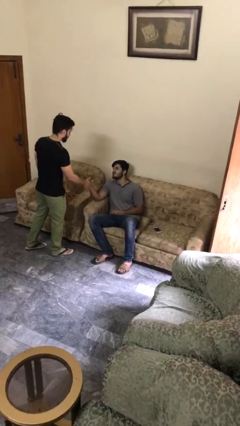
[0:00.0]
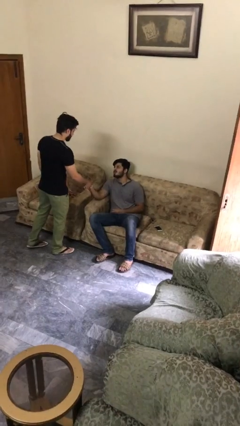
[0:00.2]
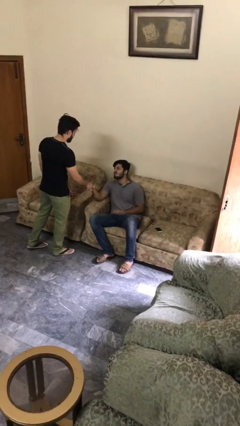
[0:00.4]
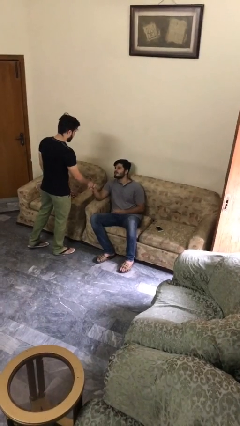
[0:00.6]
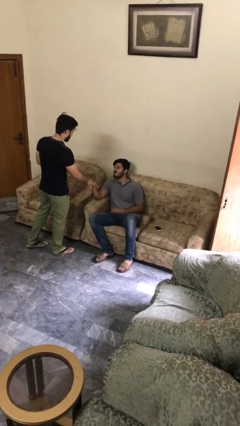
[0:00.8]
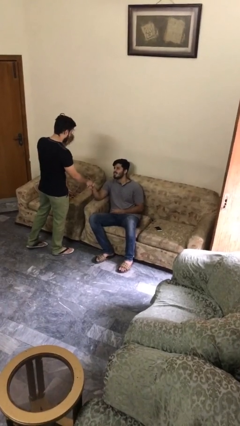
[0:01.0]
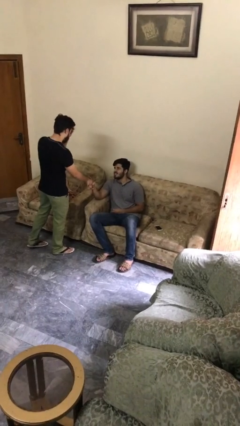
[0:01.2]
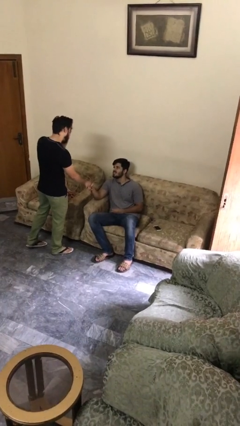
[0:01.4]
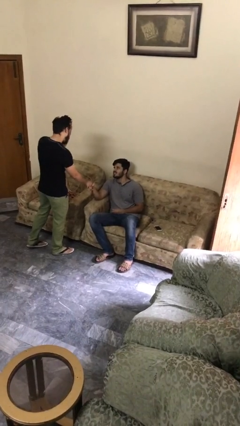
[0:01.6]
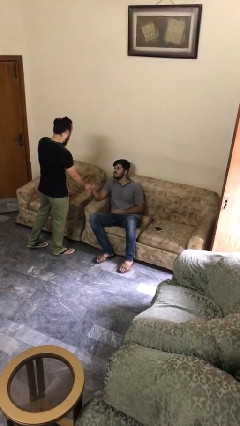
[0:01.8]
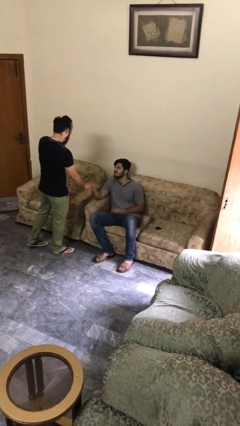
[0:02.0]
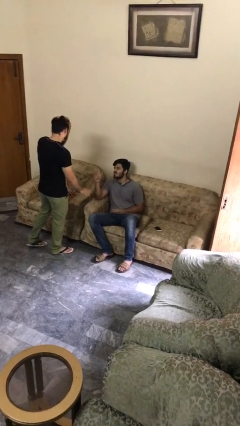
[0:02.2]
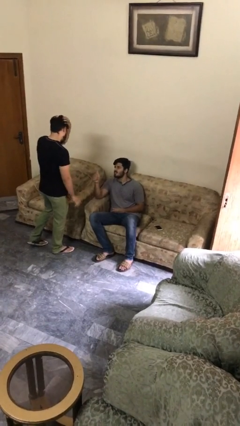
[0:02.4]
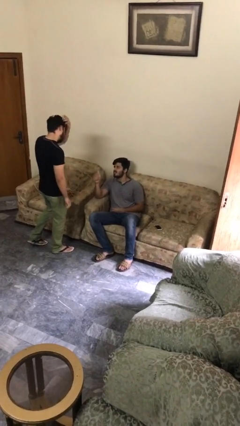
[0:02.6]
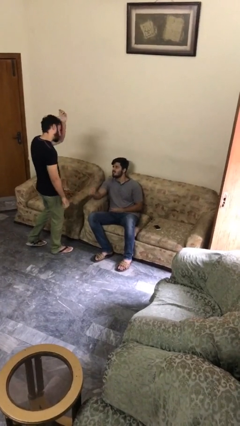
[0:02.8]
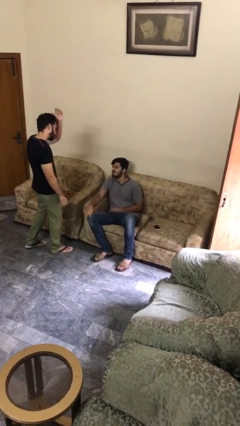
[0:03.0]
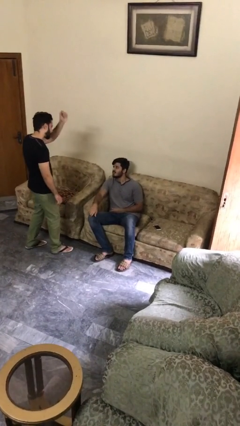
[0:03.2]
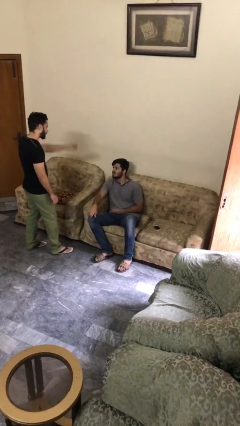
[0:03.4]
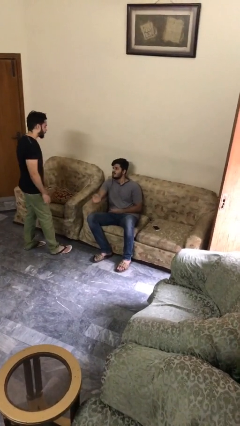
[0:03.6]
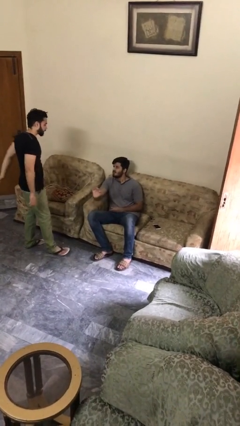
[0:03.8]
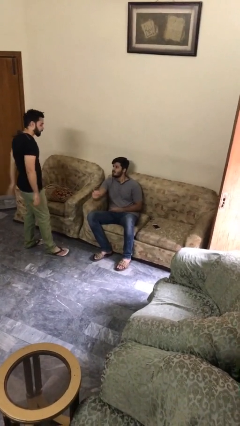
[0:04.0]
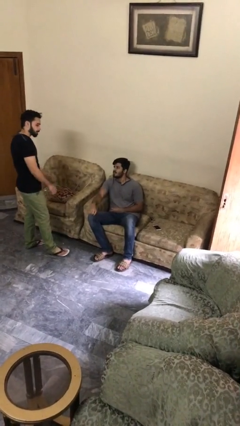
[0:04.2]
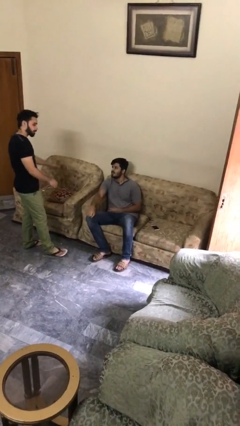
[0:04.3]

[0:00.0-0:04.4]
person shakes hand

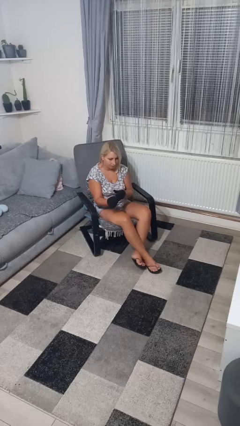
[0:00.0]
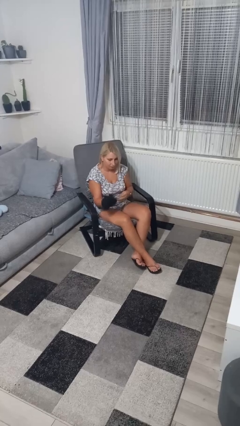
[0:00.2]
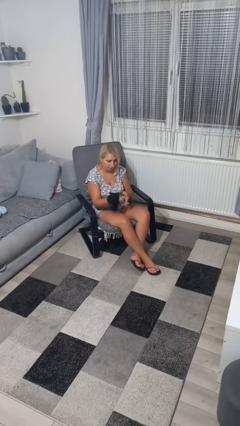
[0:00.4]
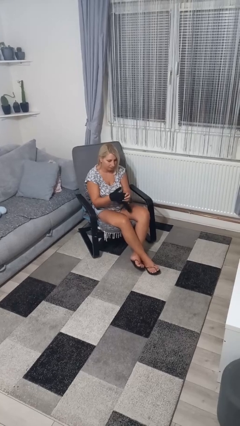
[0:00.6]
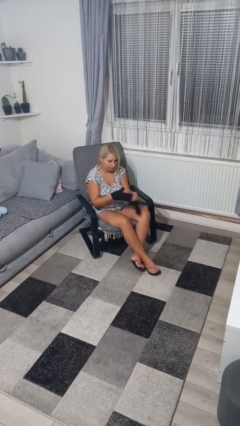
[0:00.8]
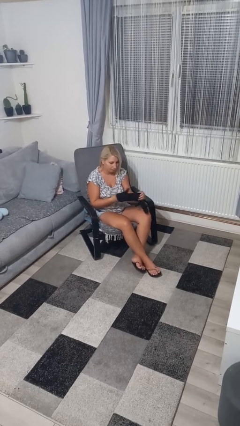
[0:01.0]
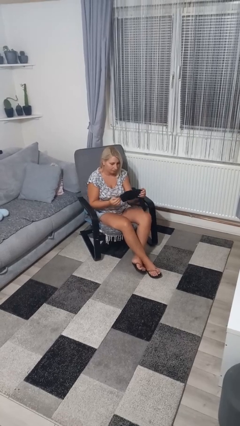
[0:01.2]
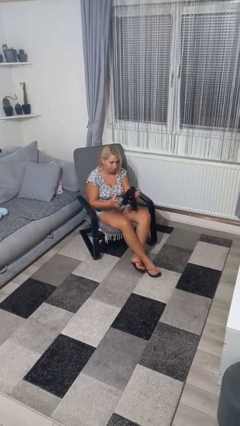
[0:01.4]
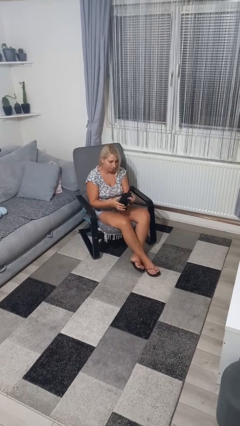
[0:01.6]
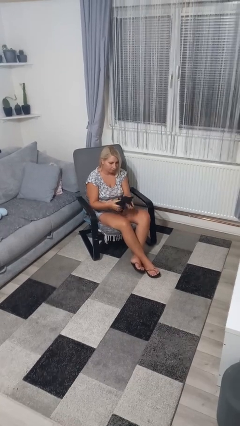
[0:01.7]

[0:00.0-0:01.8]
person takes off gloves

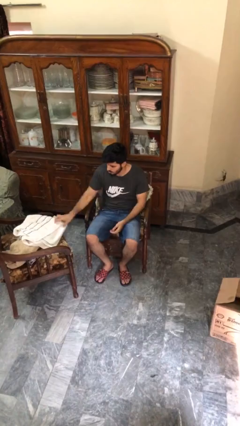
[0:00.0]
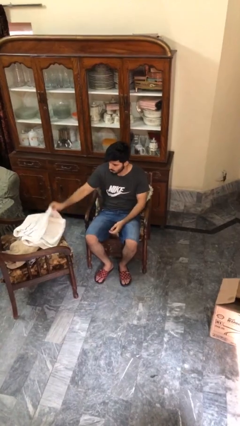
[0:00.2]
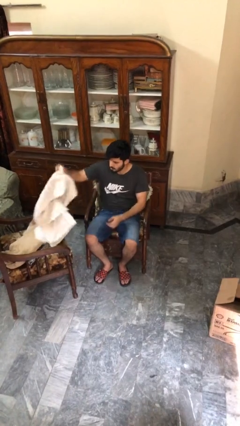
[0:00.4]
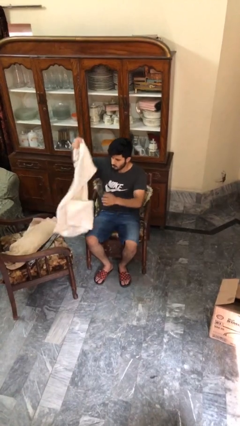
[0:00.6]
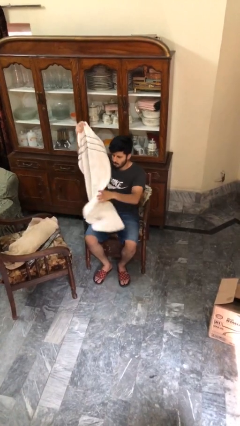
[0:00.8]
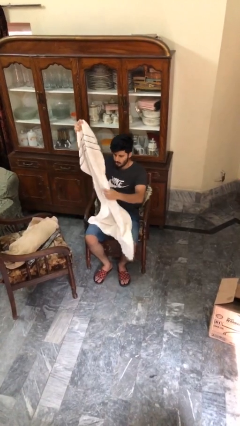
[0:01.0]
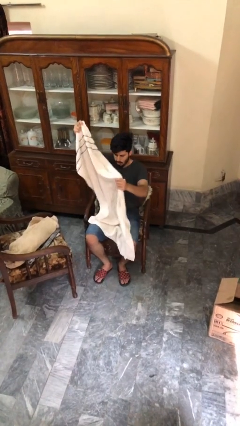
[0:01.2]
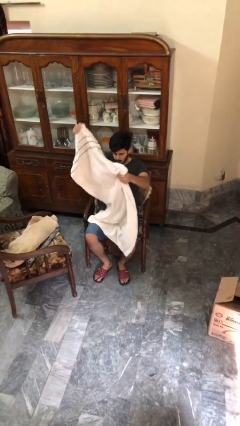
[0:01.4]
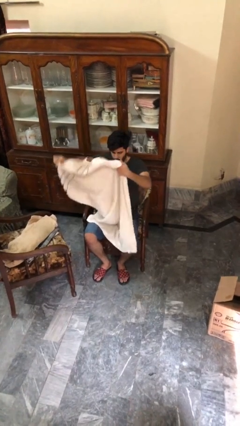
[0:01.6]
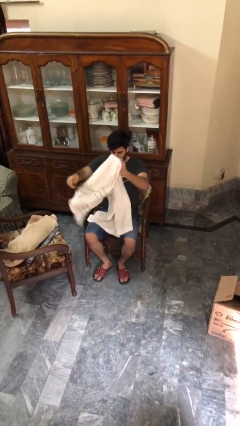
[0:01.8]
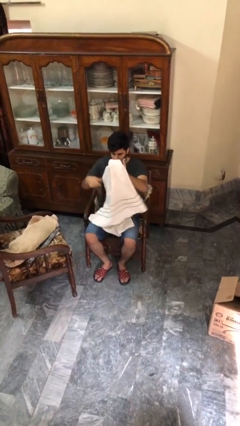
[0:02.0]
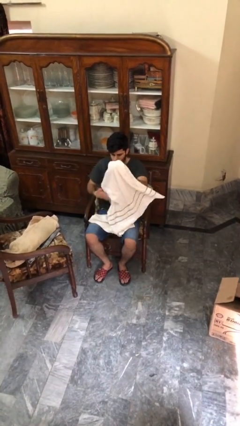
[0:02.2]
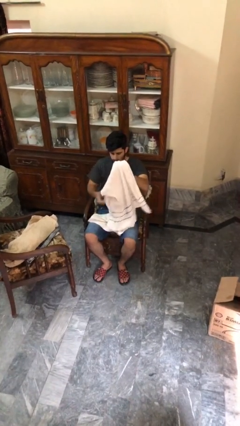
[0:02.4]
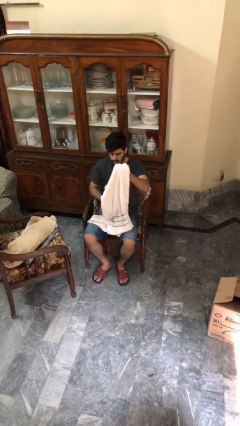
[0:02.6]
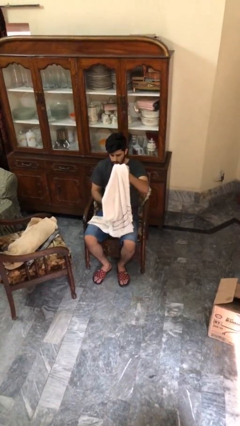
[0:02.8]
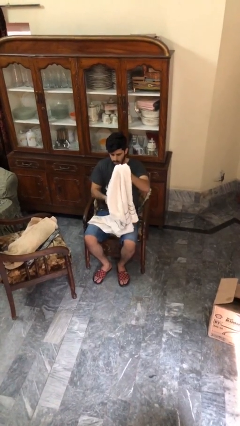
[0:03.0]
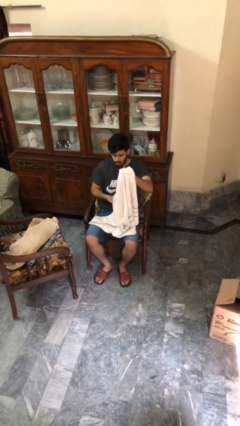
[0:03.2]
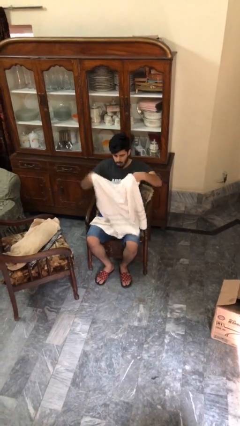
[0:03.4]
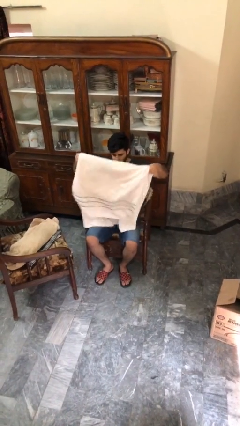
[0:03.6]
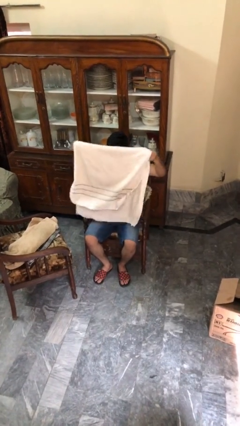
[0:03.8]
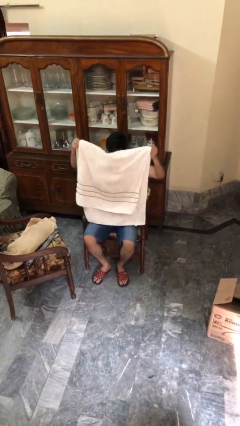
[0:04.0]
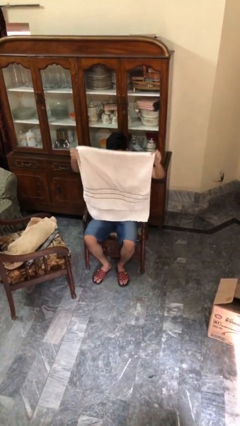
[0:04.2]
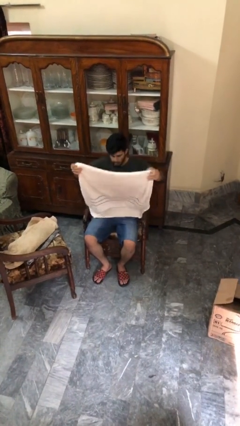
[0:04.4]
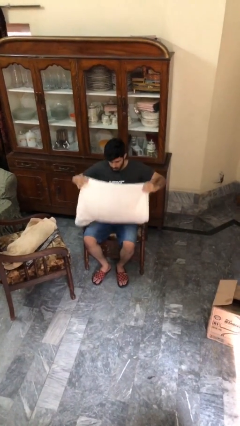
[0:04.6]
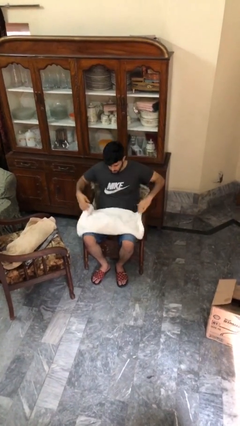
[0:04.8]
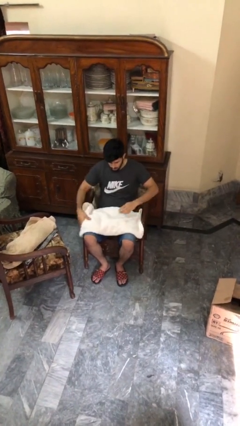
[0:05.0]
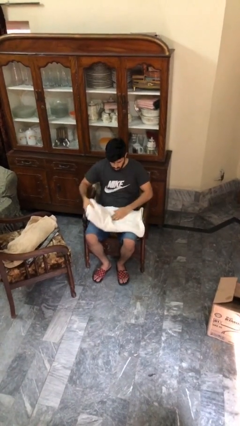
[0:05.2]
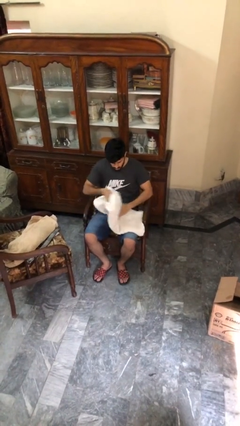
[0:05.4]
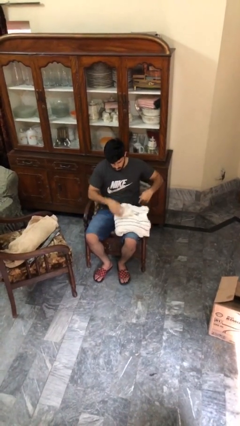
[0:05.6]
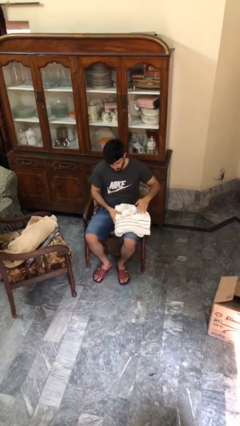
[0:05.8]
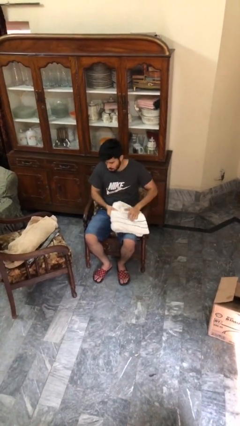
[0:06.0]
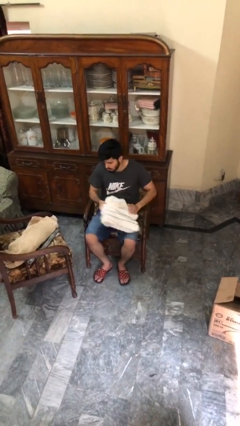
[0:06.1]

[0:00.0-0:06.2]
person folds towel

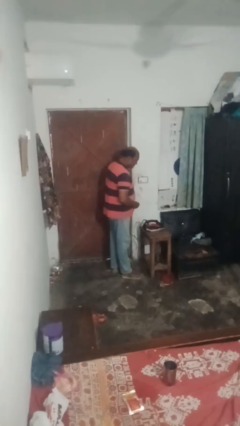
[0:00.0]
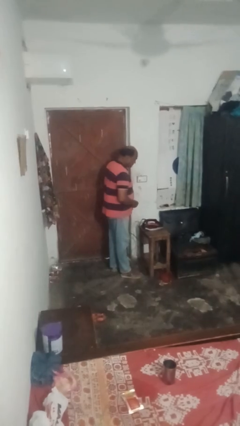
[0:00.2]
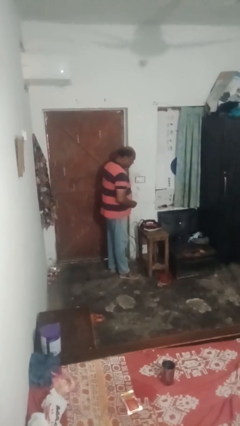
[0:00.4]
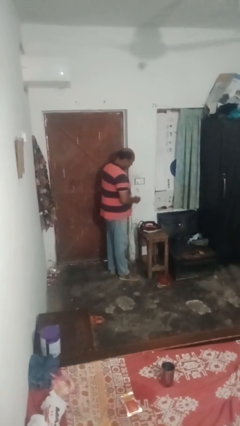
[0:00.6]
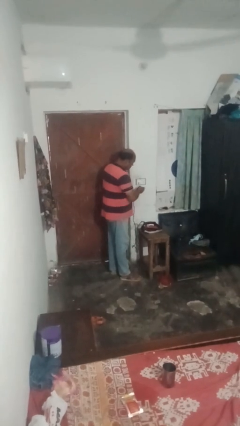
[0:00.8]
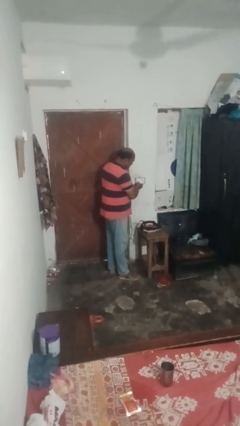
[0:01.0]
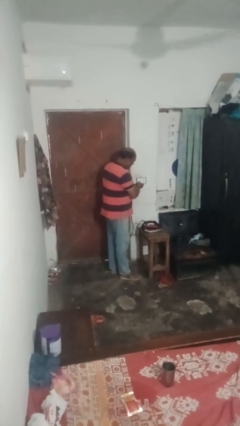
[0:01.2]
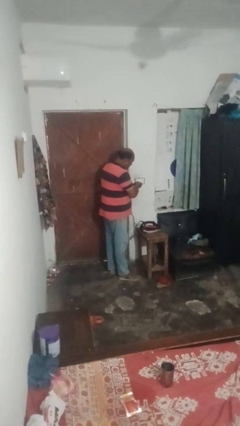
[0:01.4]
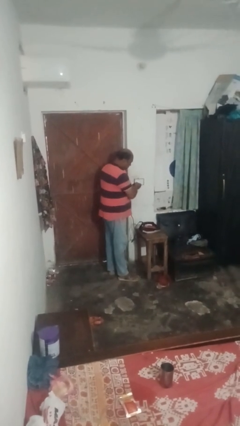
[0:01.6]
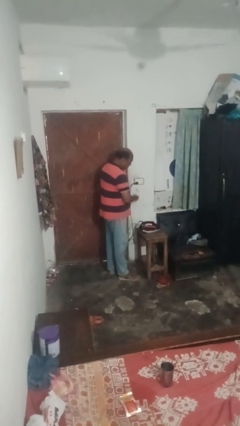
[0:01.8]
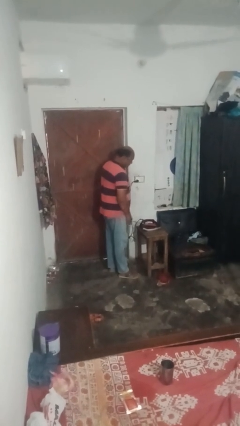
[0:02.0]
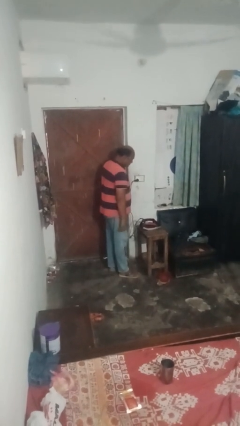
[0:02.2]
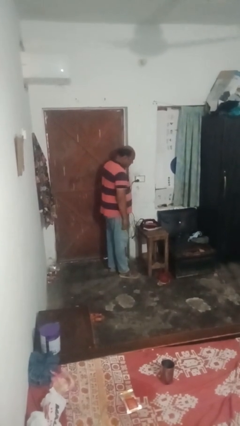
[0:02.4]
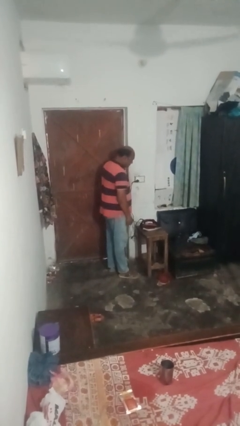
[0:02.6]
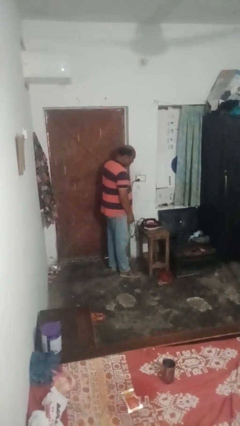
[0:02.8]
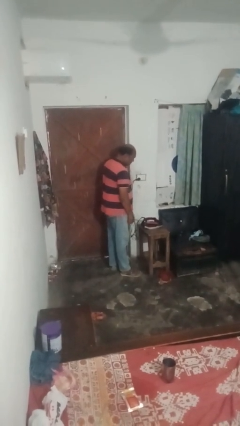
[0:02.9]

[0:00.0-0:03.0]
person plugs into electrical socket

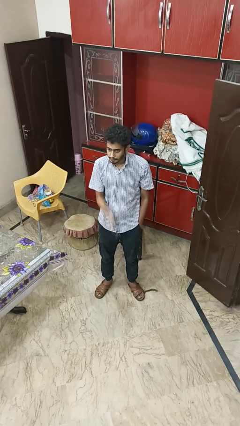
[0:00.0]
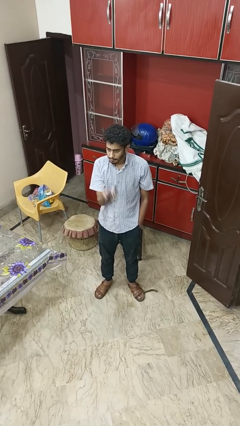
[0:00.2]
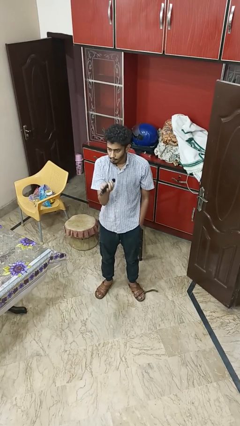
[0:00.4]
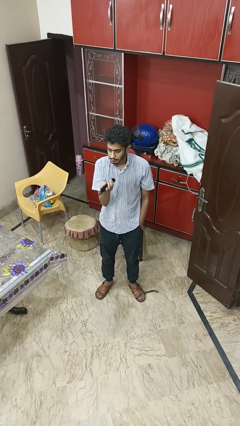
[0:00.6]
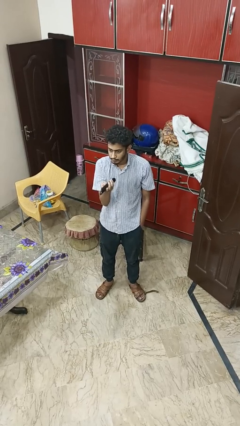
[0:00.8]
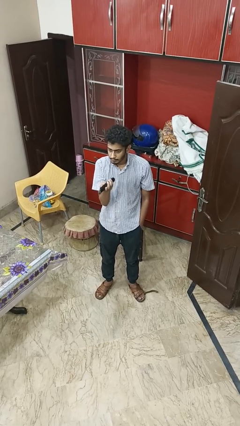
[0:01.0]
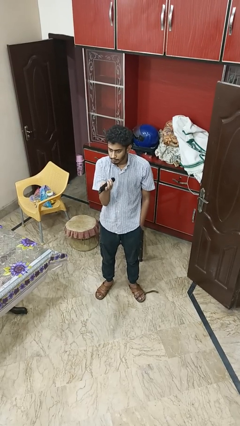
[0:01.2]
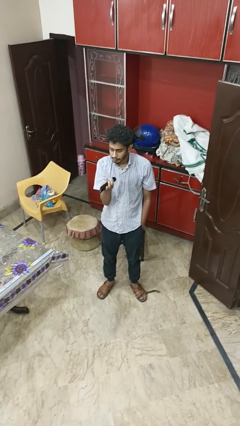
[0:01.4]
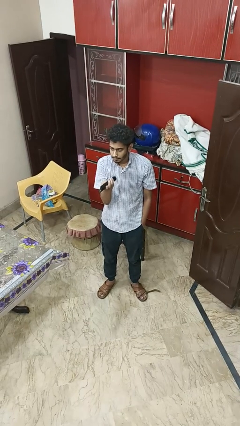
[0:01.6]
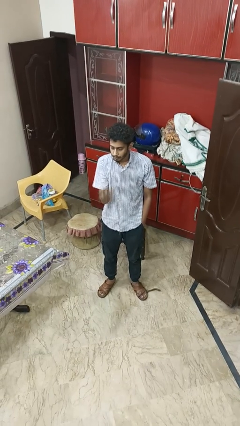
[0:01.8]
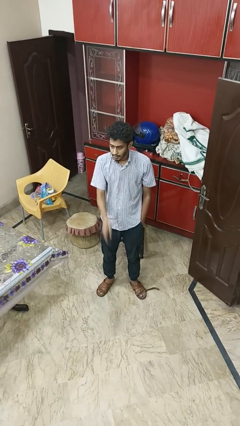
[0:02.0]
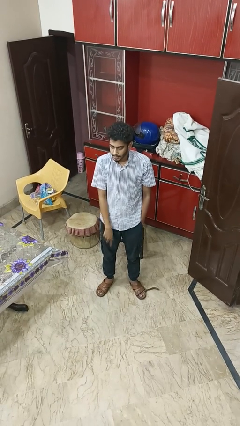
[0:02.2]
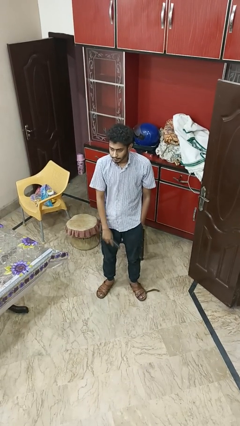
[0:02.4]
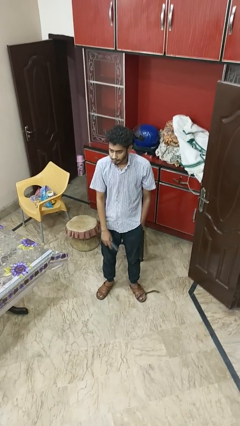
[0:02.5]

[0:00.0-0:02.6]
person uses television remote
